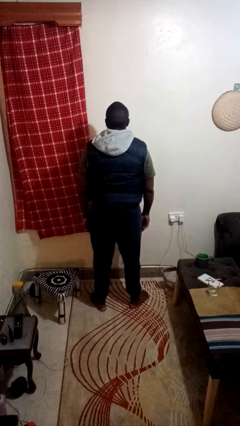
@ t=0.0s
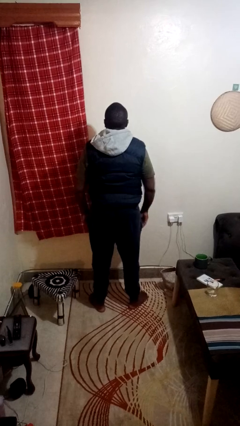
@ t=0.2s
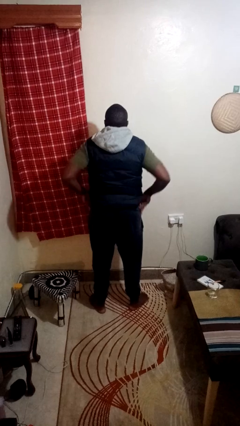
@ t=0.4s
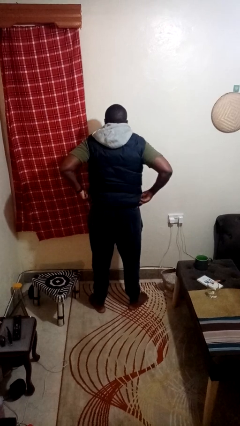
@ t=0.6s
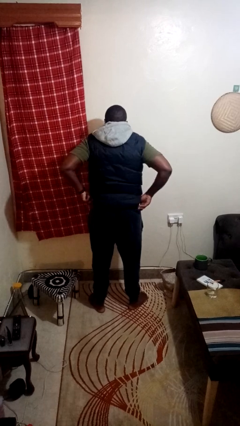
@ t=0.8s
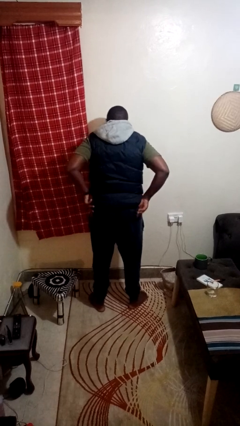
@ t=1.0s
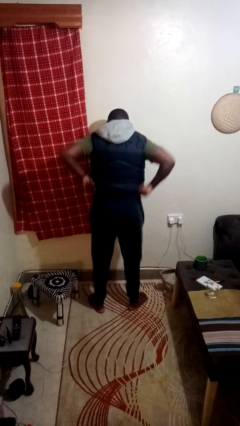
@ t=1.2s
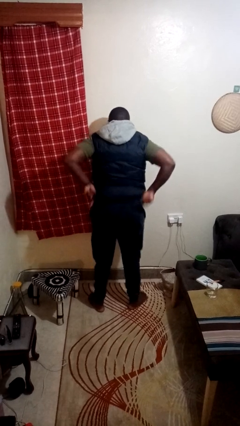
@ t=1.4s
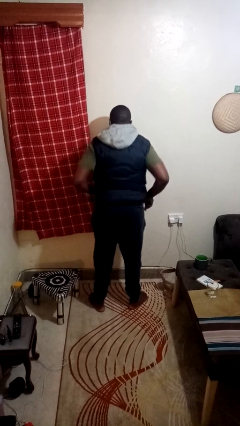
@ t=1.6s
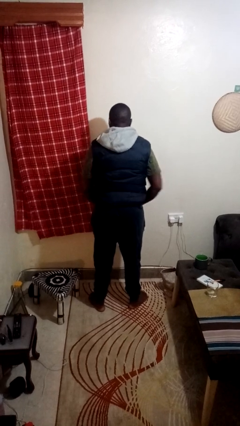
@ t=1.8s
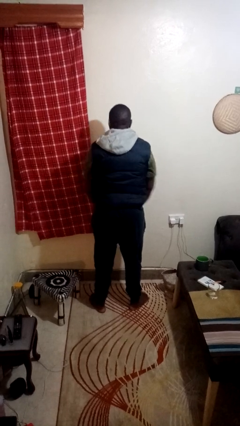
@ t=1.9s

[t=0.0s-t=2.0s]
person hikes up pants

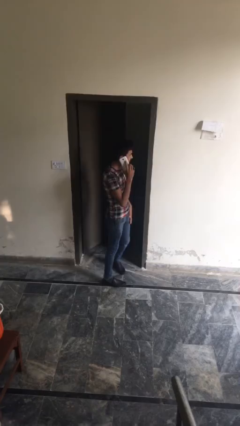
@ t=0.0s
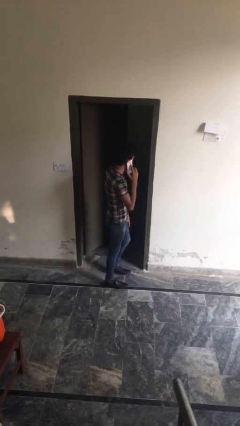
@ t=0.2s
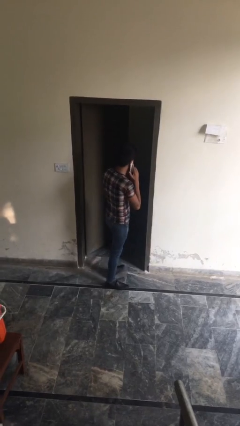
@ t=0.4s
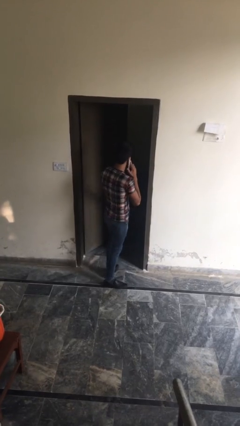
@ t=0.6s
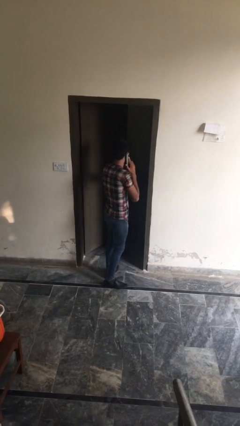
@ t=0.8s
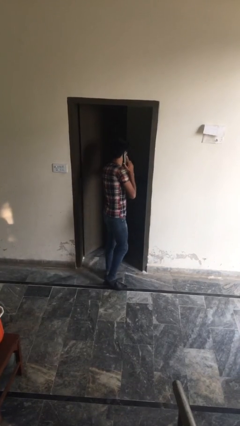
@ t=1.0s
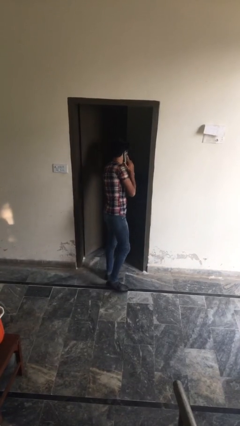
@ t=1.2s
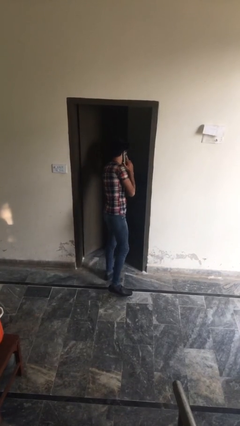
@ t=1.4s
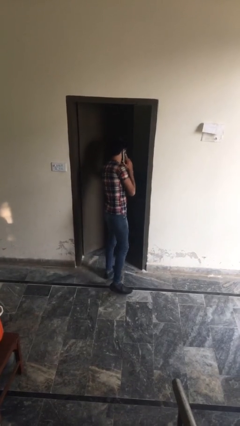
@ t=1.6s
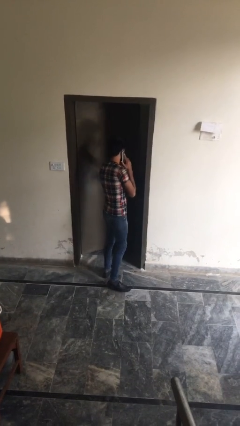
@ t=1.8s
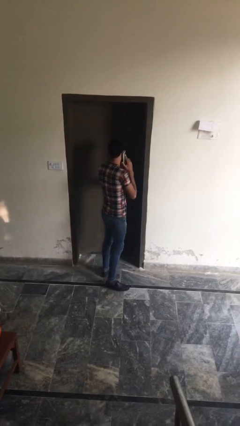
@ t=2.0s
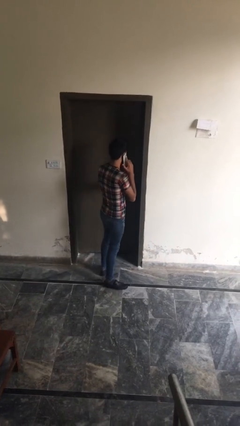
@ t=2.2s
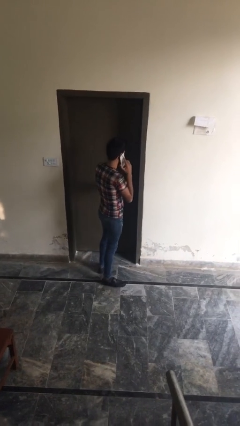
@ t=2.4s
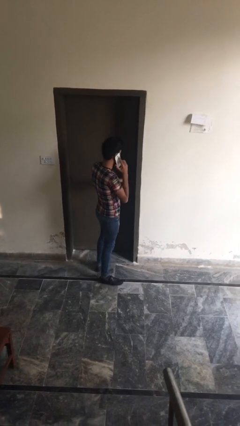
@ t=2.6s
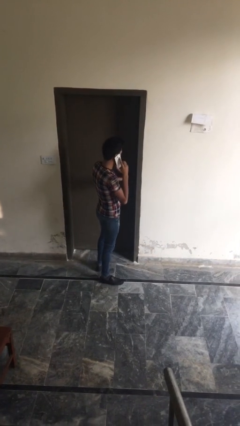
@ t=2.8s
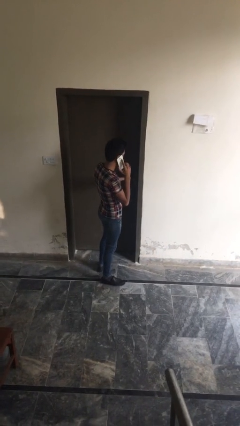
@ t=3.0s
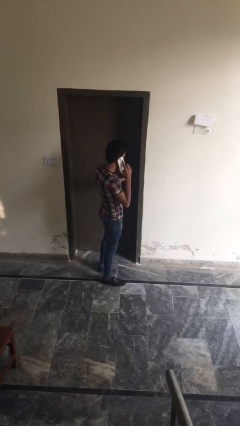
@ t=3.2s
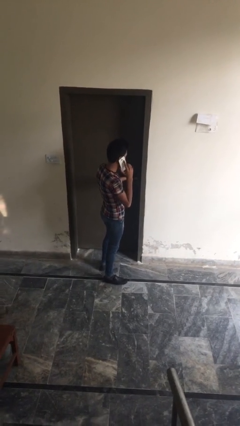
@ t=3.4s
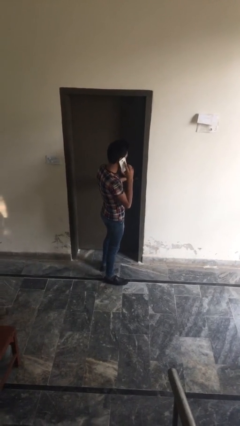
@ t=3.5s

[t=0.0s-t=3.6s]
person closes facility door

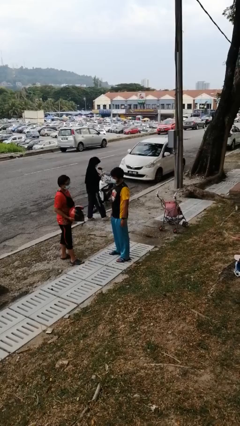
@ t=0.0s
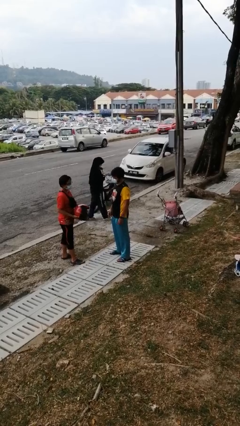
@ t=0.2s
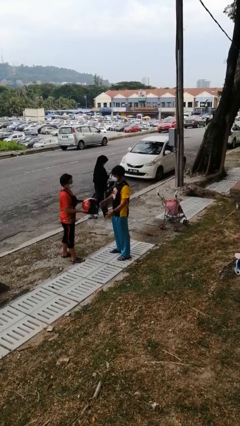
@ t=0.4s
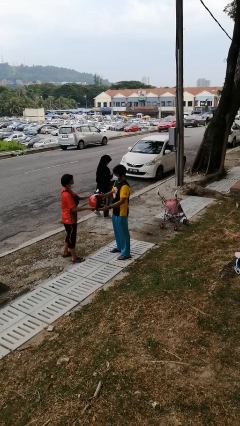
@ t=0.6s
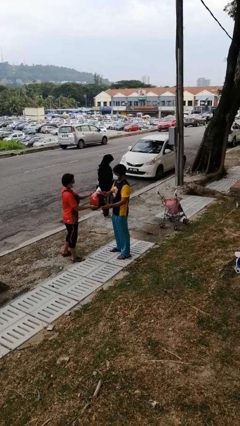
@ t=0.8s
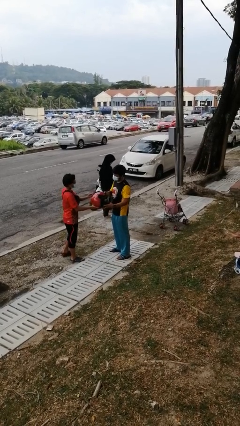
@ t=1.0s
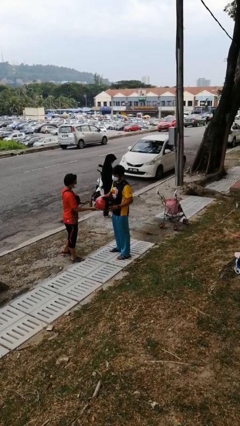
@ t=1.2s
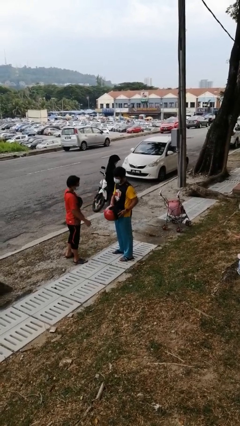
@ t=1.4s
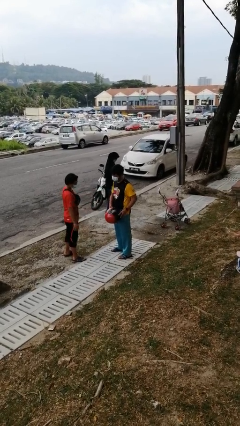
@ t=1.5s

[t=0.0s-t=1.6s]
person transfers object to person

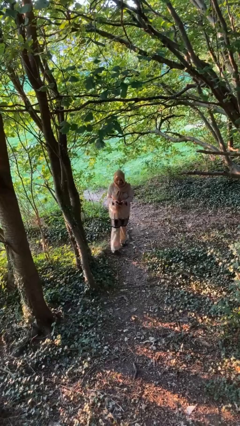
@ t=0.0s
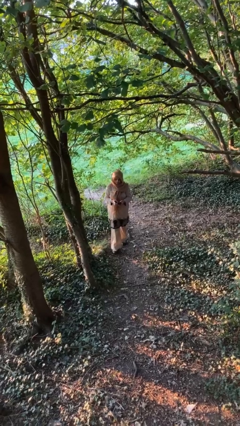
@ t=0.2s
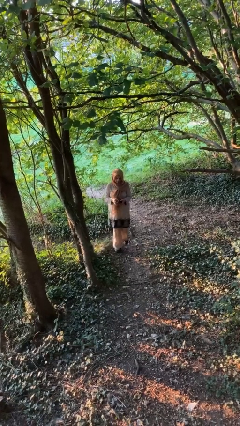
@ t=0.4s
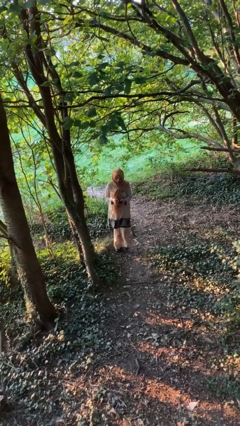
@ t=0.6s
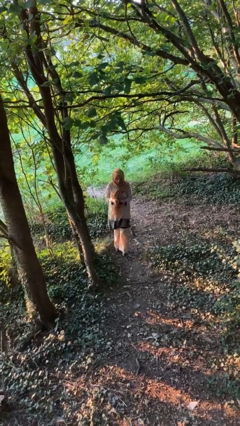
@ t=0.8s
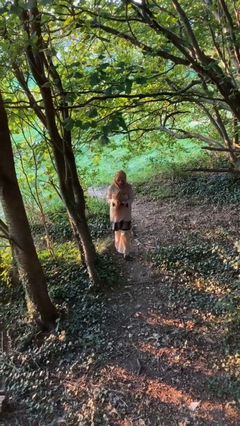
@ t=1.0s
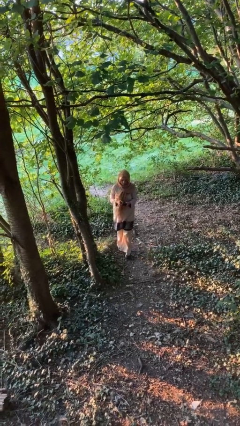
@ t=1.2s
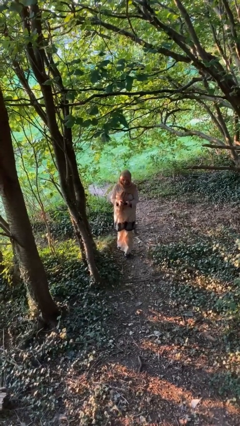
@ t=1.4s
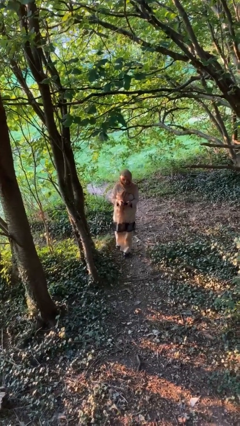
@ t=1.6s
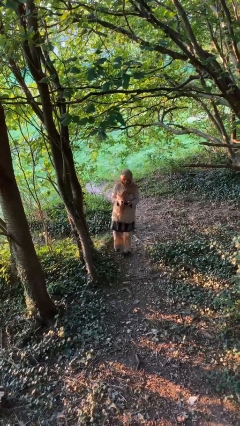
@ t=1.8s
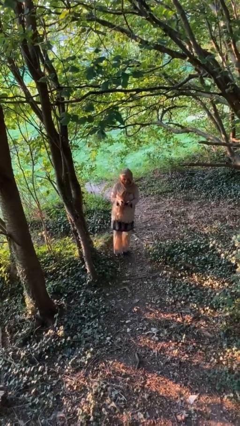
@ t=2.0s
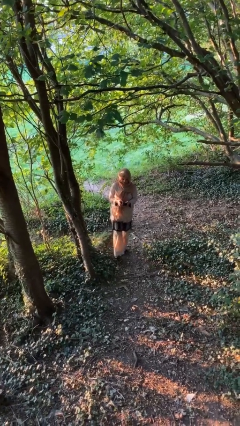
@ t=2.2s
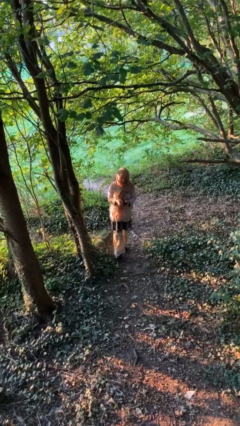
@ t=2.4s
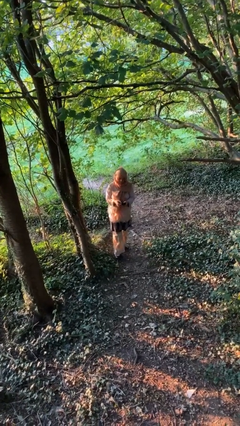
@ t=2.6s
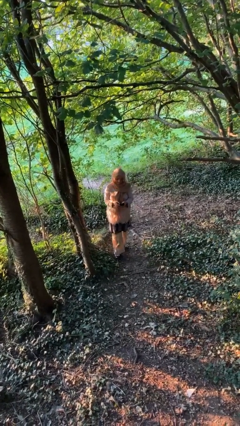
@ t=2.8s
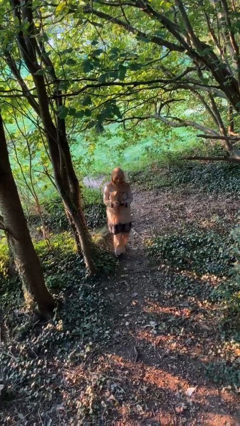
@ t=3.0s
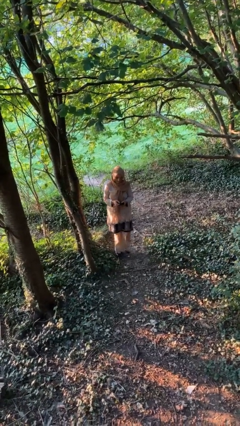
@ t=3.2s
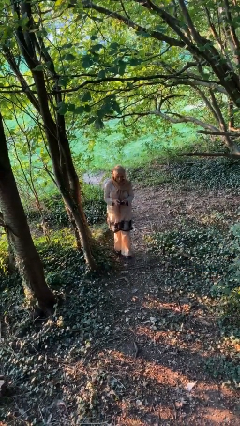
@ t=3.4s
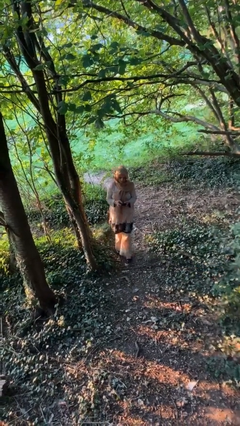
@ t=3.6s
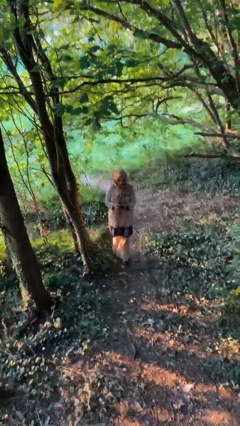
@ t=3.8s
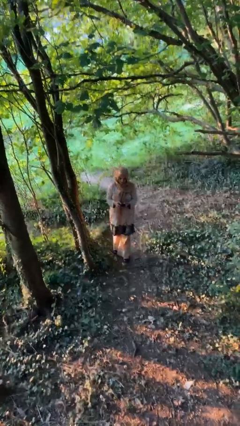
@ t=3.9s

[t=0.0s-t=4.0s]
person texts on phone

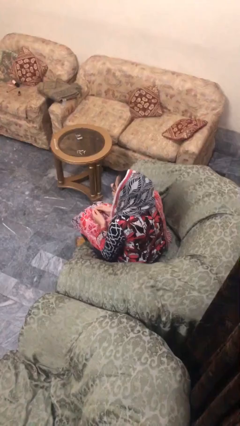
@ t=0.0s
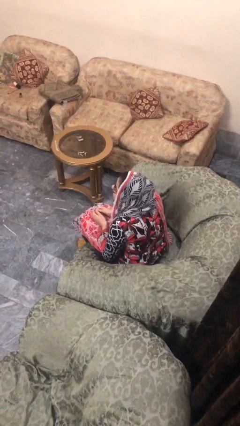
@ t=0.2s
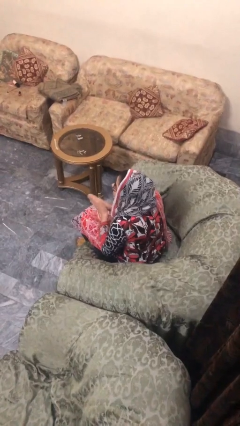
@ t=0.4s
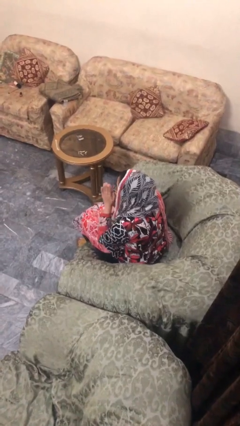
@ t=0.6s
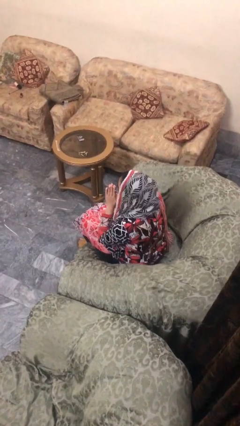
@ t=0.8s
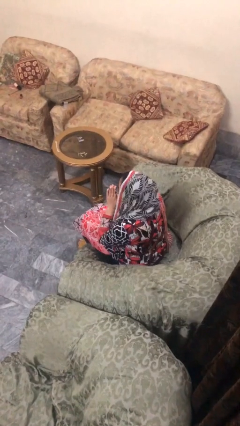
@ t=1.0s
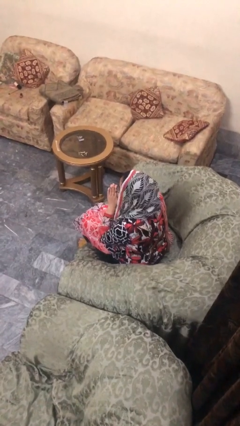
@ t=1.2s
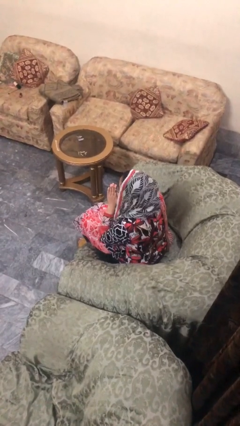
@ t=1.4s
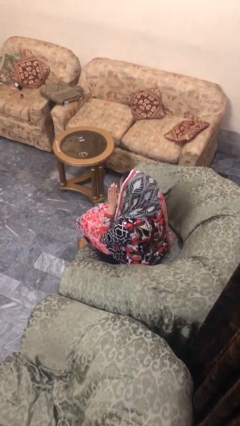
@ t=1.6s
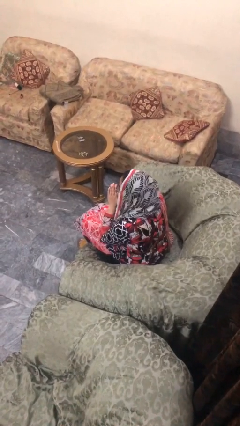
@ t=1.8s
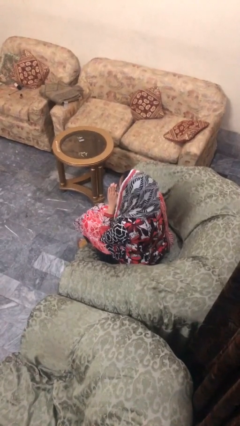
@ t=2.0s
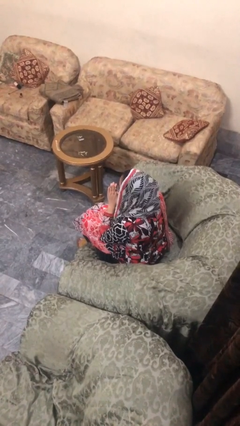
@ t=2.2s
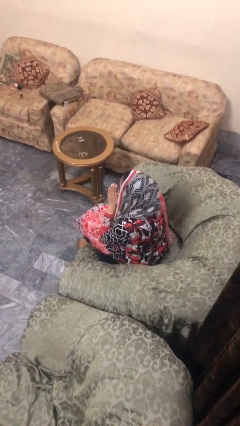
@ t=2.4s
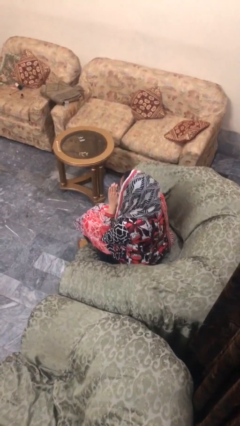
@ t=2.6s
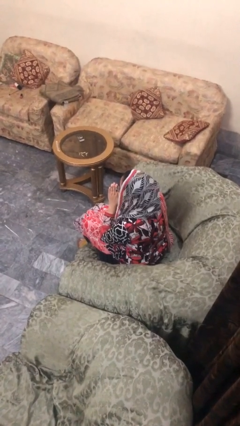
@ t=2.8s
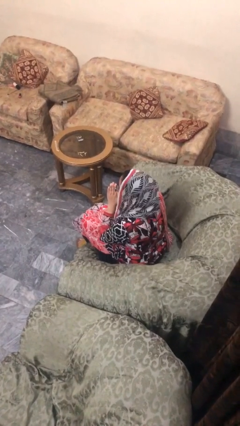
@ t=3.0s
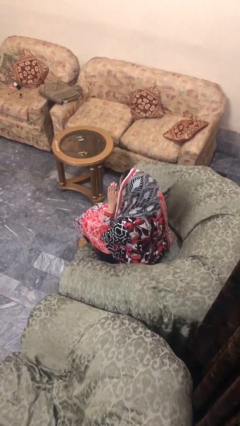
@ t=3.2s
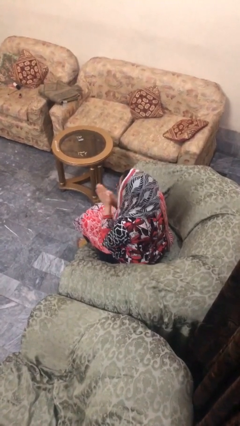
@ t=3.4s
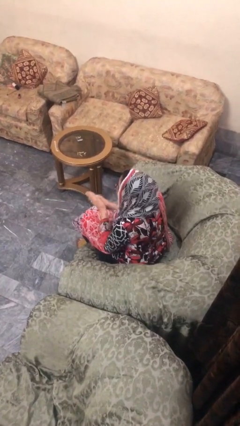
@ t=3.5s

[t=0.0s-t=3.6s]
person blows into hands

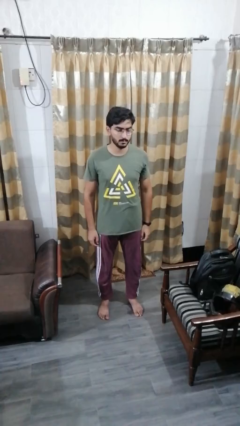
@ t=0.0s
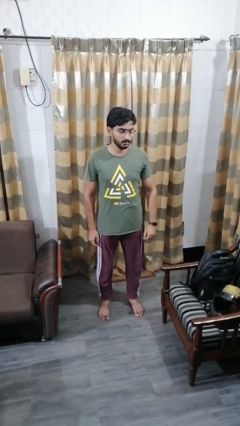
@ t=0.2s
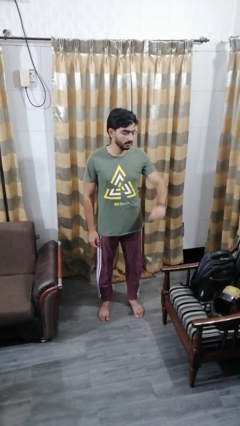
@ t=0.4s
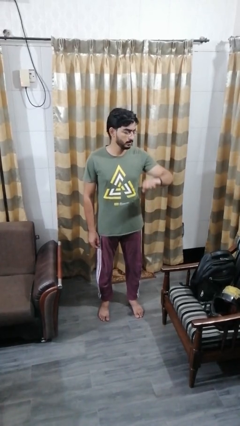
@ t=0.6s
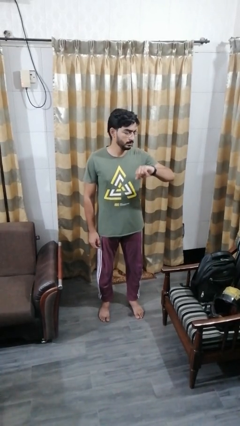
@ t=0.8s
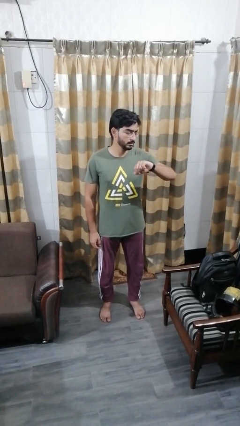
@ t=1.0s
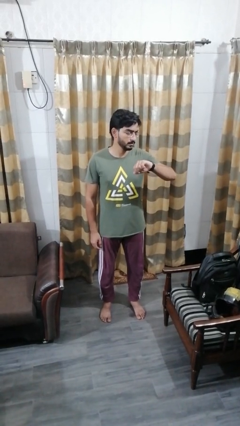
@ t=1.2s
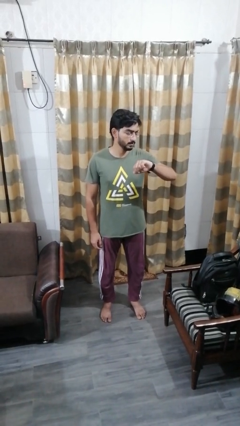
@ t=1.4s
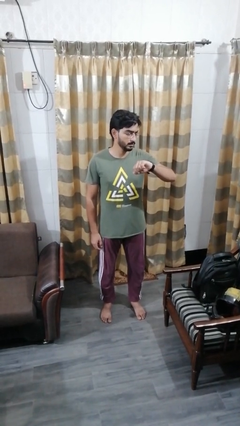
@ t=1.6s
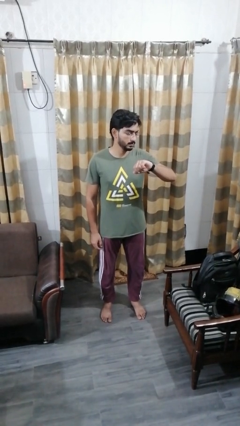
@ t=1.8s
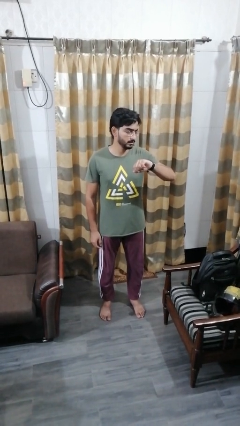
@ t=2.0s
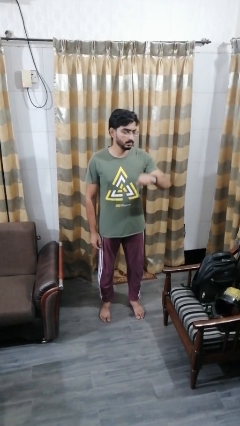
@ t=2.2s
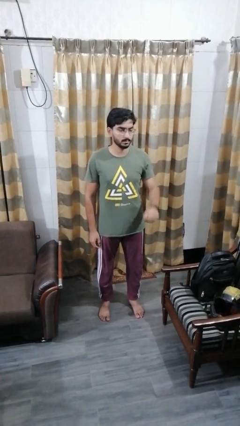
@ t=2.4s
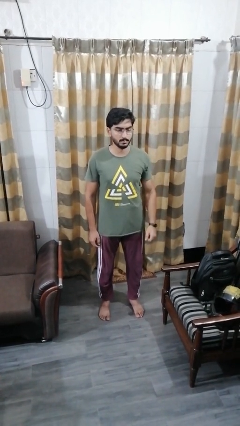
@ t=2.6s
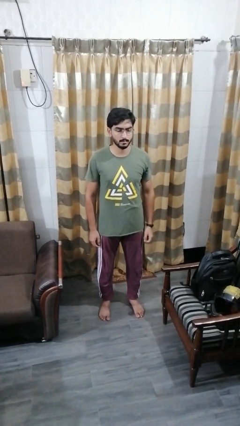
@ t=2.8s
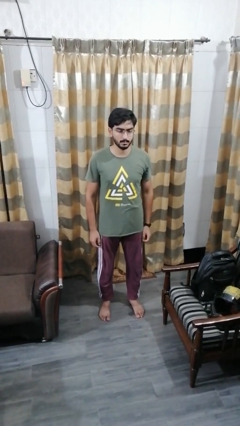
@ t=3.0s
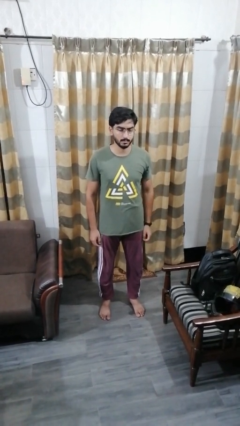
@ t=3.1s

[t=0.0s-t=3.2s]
person looks at wristwatch
